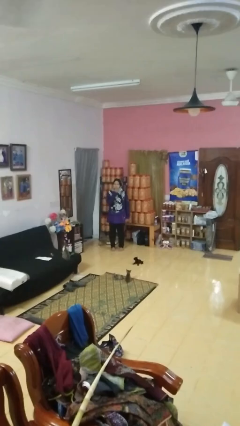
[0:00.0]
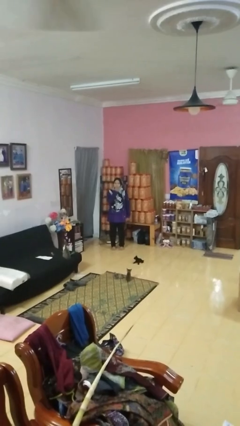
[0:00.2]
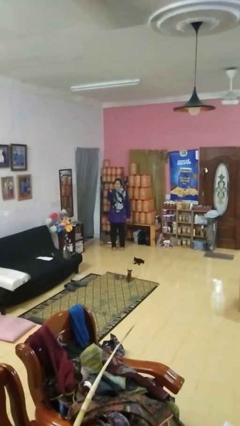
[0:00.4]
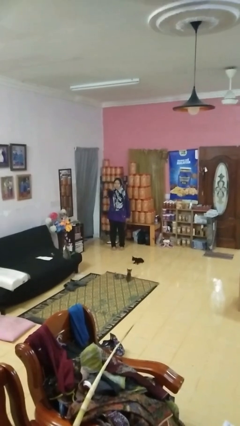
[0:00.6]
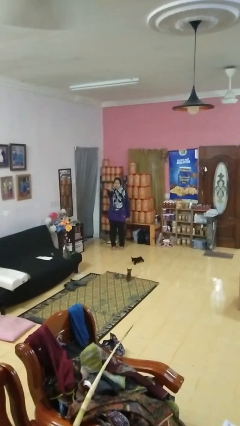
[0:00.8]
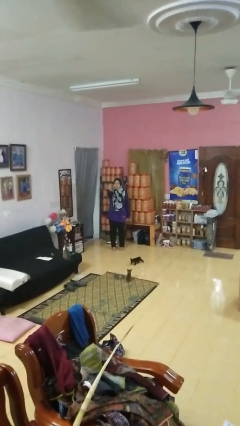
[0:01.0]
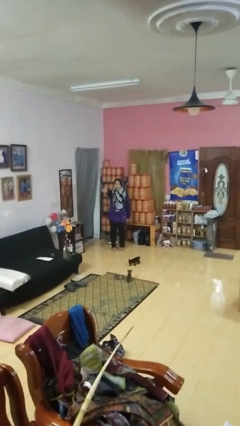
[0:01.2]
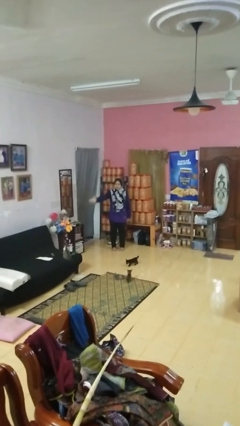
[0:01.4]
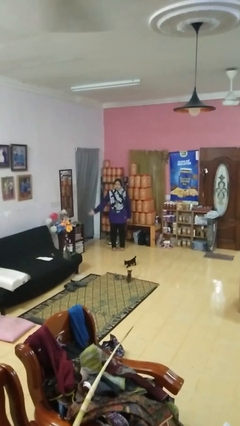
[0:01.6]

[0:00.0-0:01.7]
person gestures blow kiss

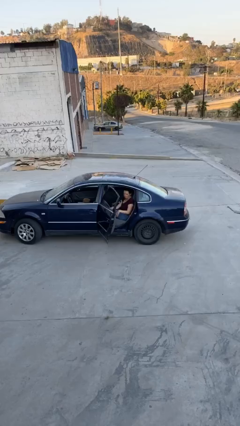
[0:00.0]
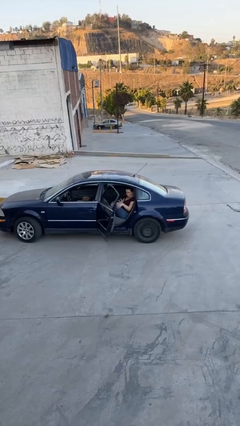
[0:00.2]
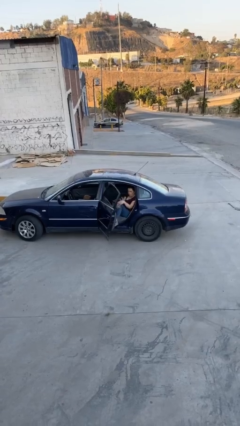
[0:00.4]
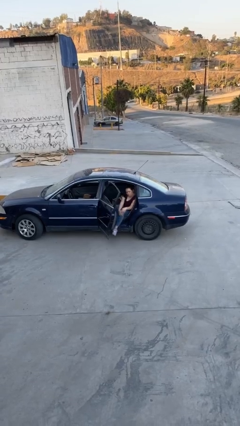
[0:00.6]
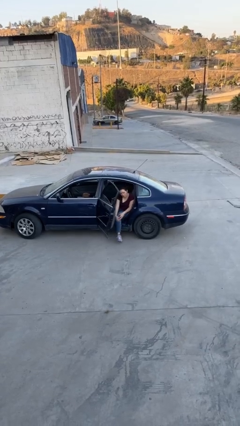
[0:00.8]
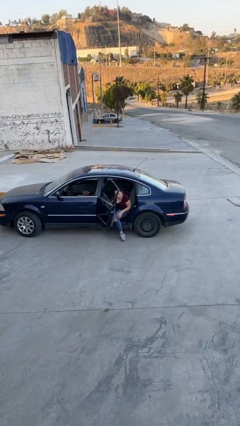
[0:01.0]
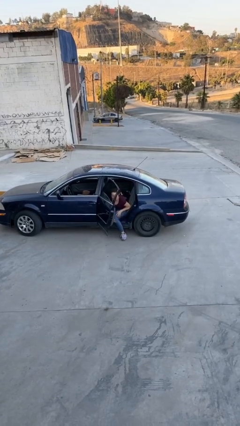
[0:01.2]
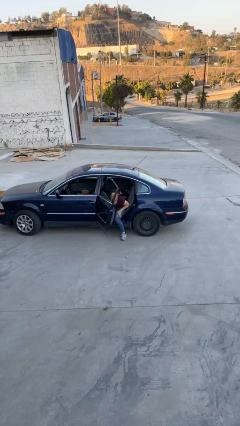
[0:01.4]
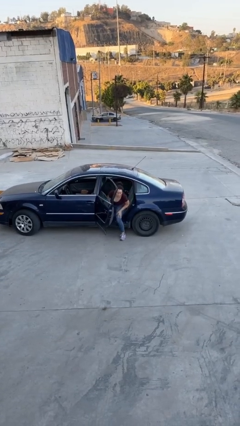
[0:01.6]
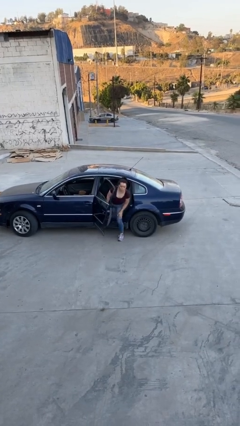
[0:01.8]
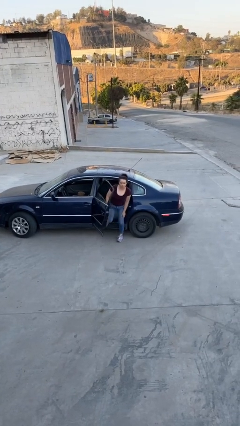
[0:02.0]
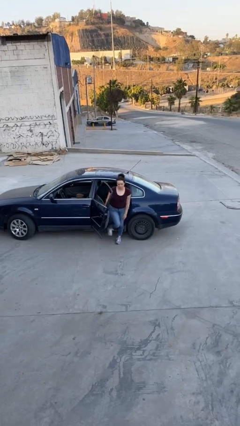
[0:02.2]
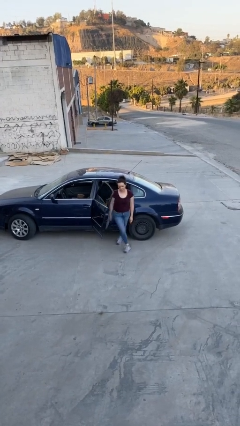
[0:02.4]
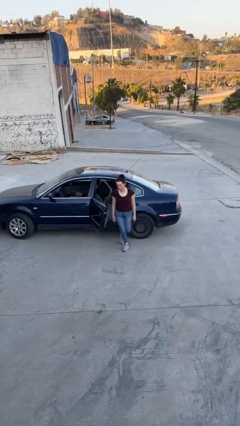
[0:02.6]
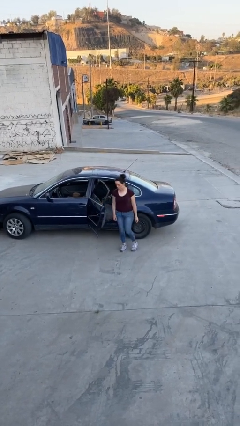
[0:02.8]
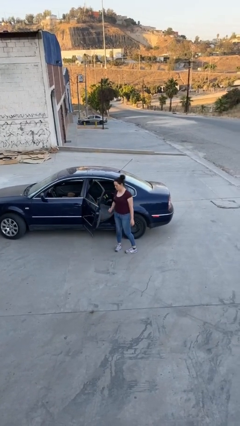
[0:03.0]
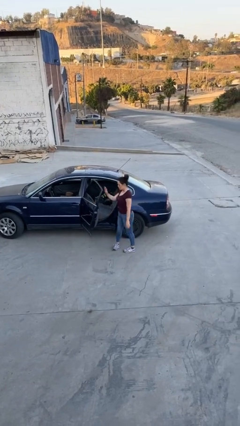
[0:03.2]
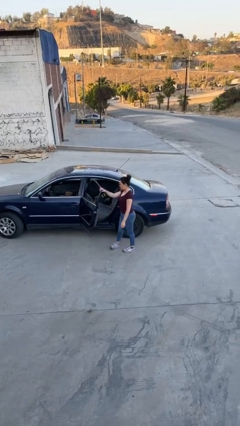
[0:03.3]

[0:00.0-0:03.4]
person exits car

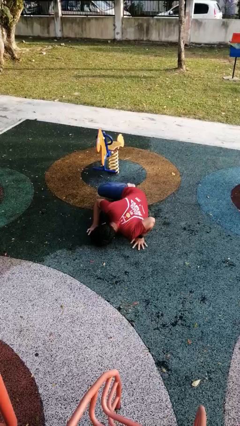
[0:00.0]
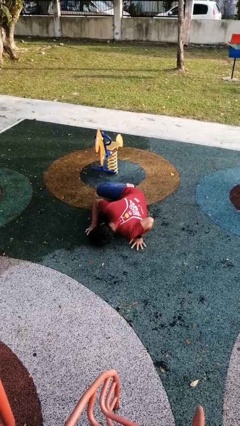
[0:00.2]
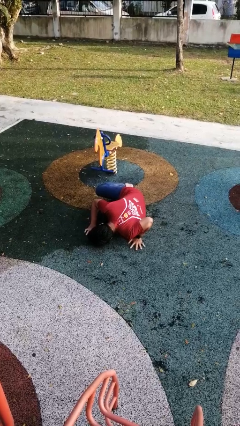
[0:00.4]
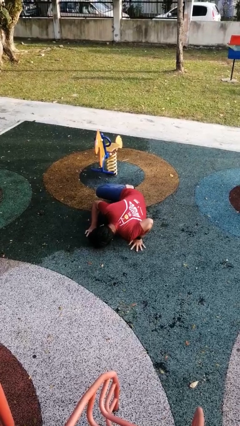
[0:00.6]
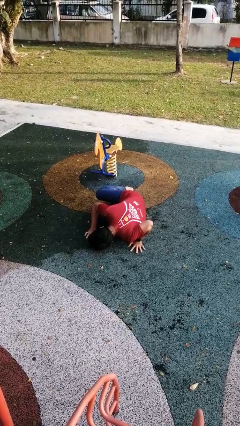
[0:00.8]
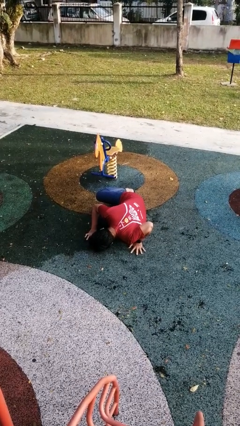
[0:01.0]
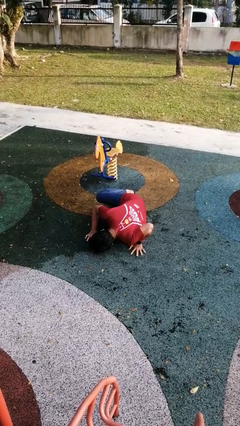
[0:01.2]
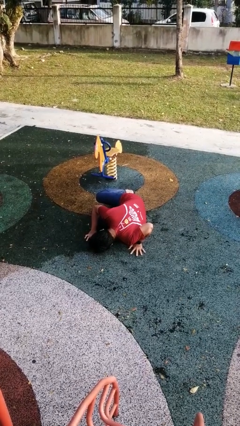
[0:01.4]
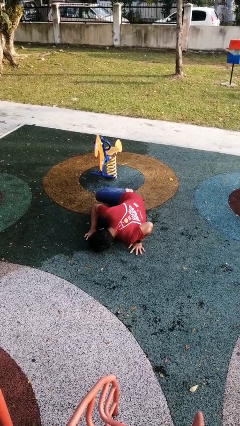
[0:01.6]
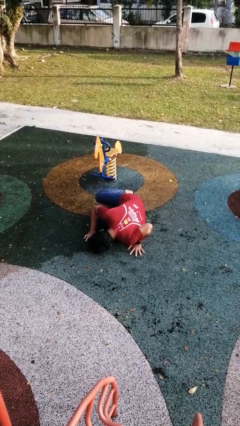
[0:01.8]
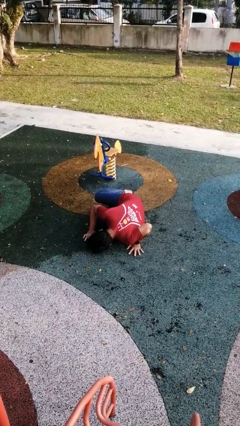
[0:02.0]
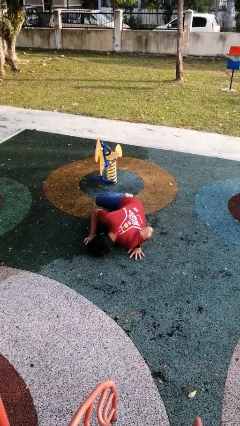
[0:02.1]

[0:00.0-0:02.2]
person lies down on floor

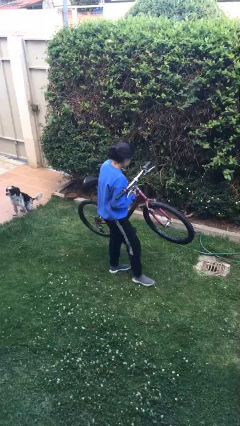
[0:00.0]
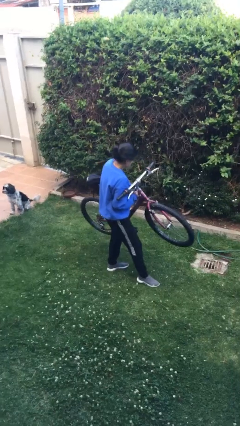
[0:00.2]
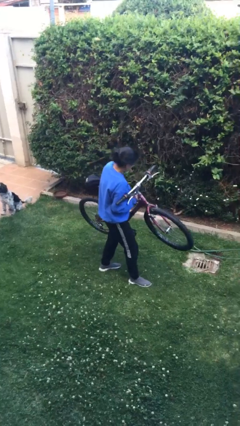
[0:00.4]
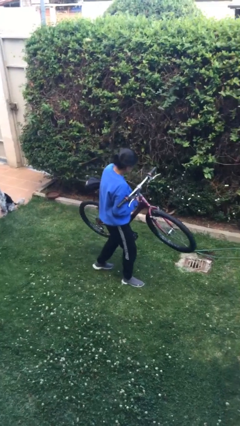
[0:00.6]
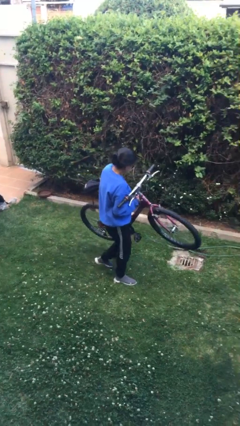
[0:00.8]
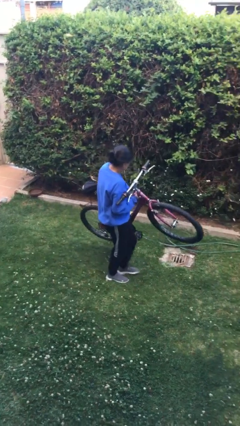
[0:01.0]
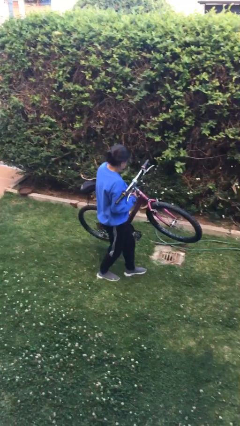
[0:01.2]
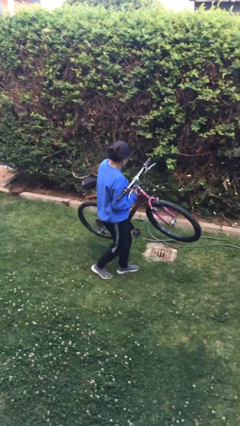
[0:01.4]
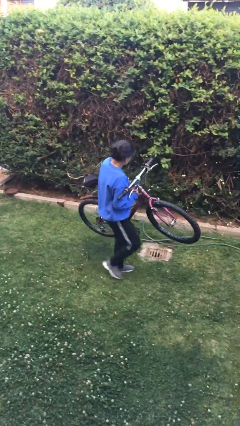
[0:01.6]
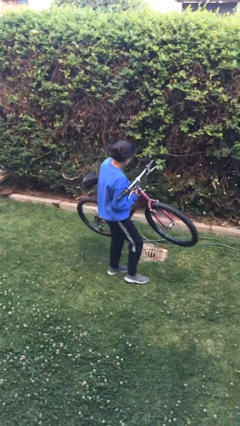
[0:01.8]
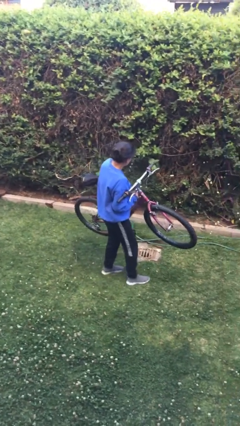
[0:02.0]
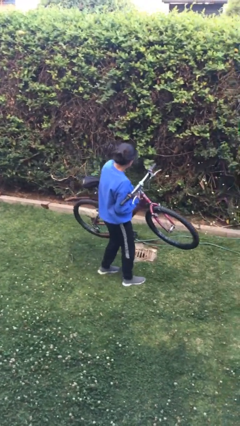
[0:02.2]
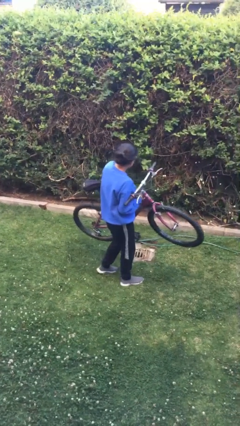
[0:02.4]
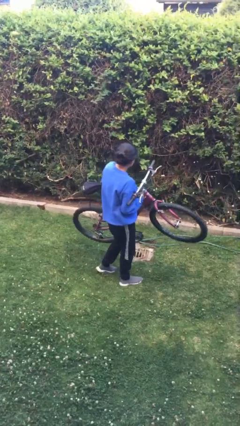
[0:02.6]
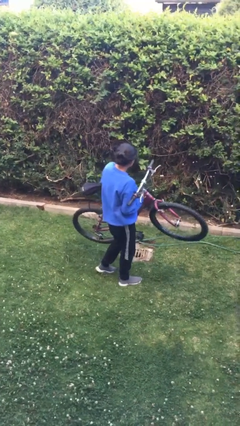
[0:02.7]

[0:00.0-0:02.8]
person carries bicycle

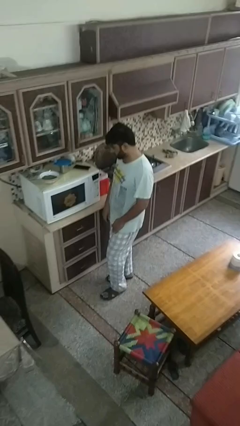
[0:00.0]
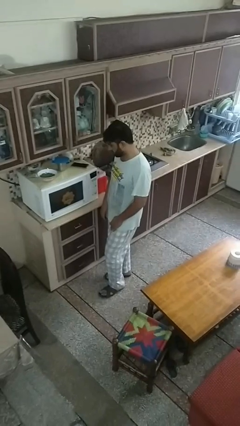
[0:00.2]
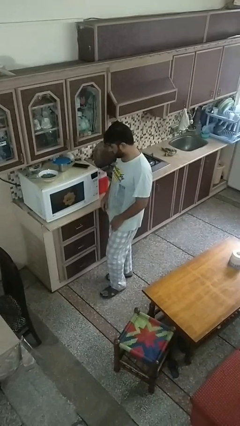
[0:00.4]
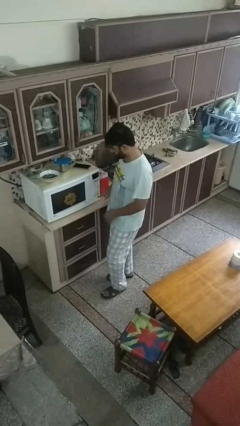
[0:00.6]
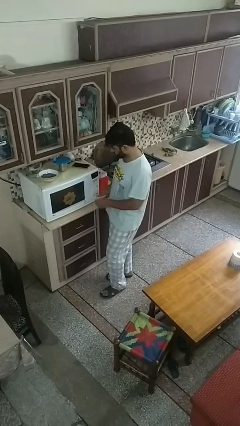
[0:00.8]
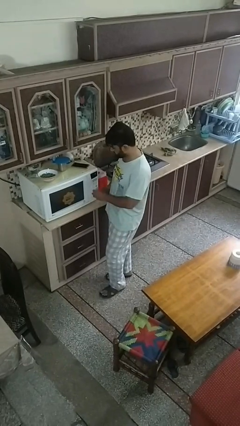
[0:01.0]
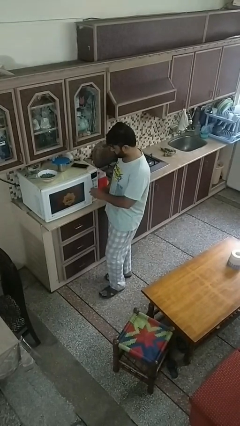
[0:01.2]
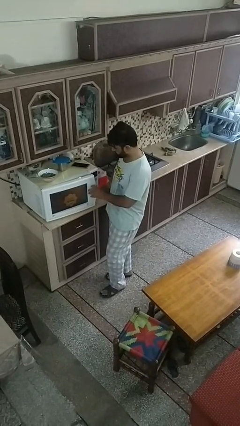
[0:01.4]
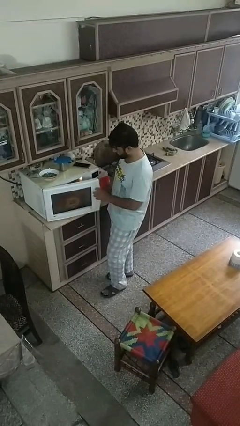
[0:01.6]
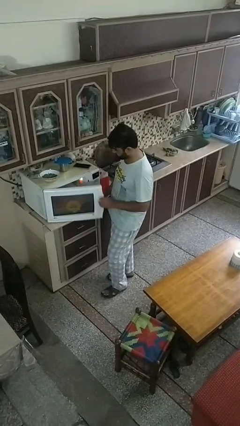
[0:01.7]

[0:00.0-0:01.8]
person opens oven door

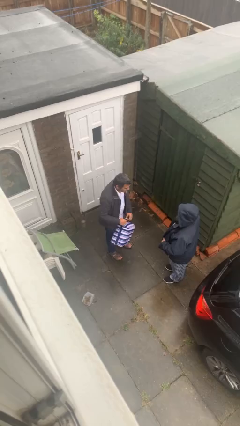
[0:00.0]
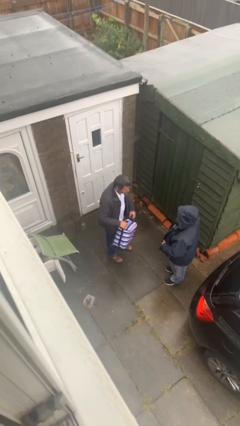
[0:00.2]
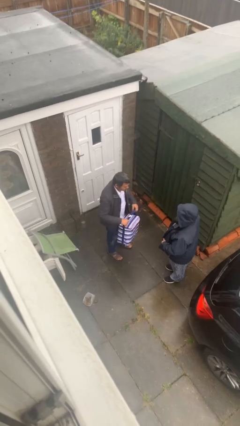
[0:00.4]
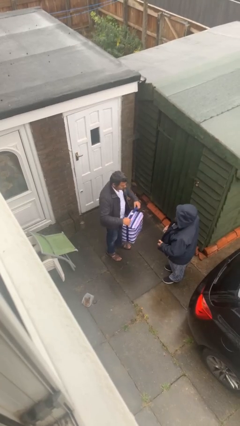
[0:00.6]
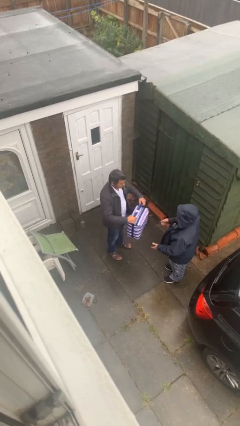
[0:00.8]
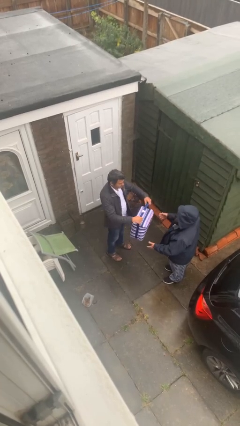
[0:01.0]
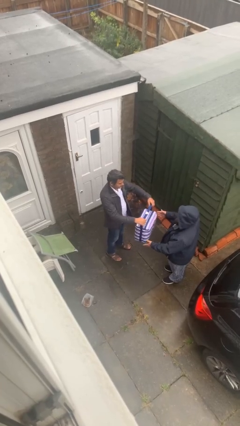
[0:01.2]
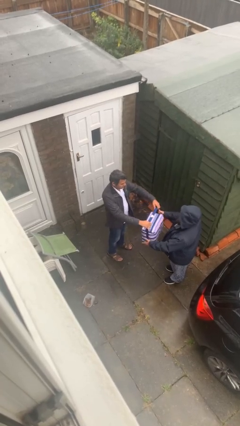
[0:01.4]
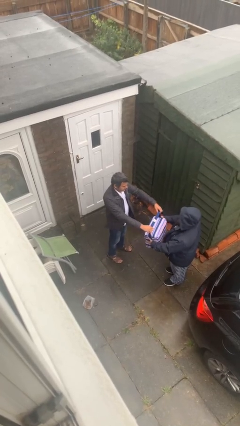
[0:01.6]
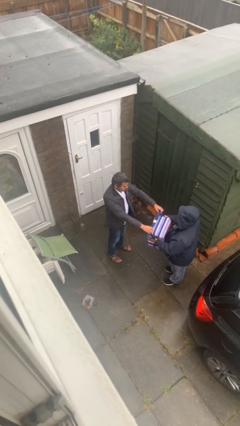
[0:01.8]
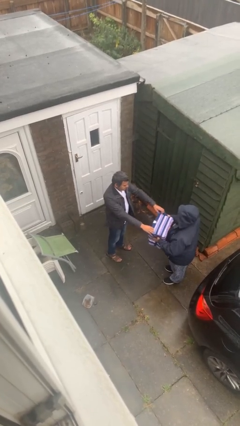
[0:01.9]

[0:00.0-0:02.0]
person transfers object to person

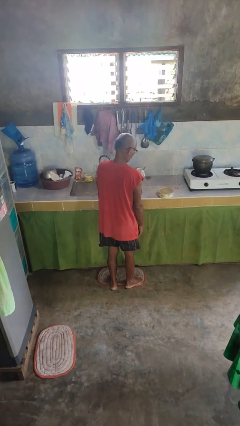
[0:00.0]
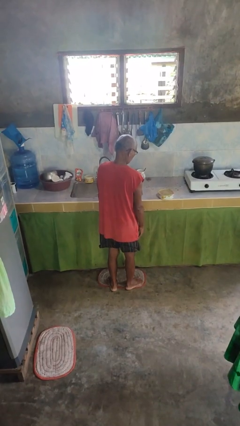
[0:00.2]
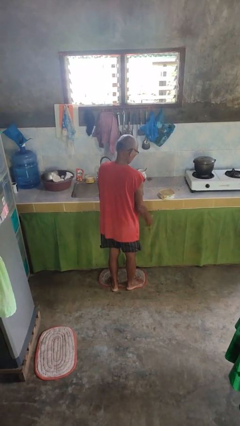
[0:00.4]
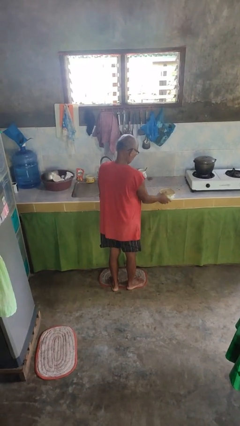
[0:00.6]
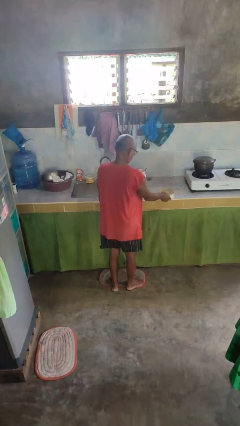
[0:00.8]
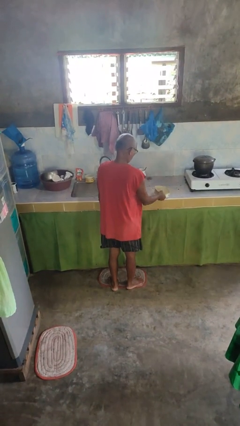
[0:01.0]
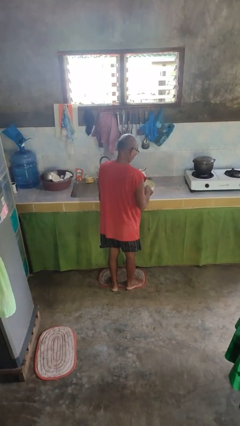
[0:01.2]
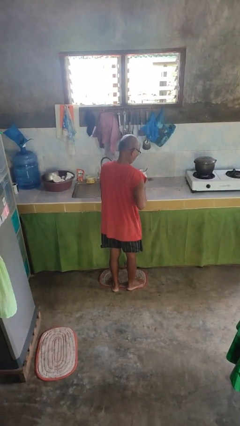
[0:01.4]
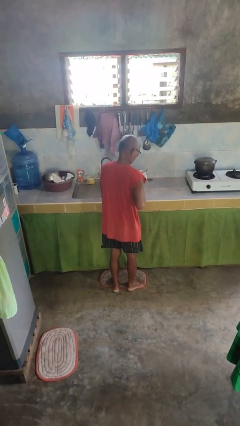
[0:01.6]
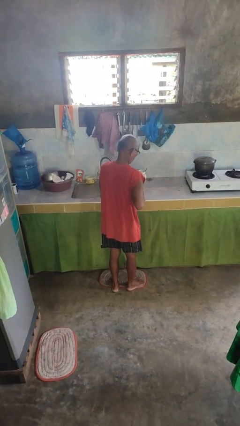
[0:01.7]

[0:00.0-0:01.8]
person picks up object from countertop

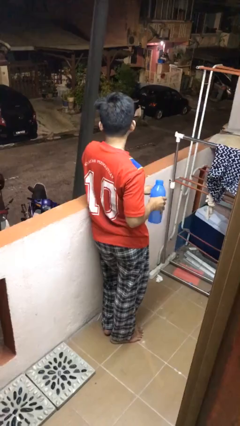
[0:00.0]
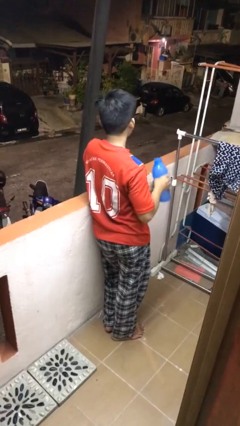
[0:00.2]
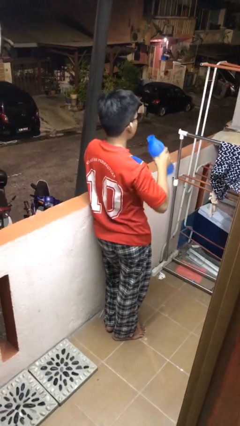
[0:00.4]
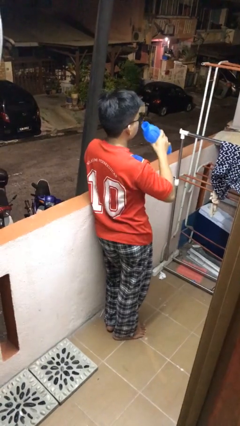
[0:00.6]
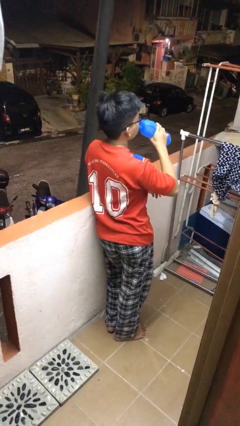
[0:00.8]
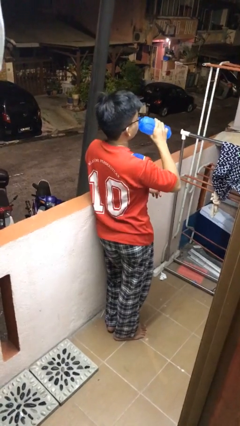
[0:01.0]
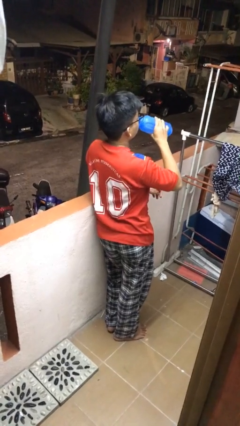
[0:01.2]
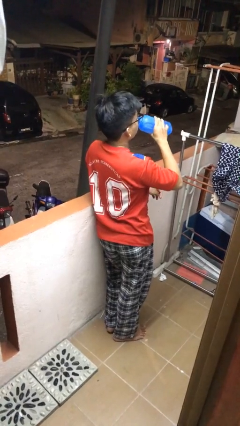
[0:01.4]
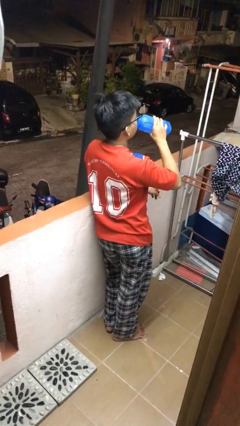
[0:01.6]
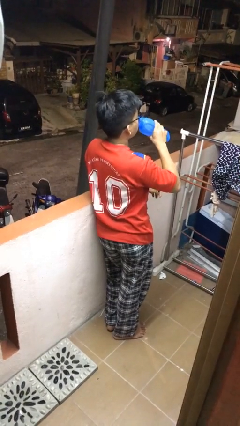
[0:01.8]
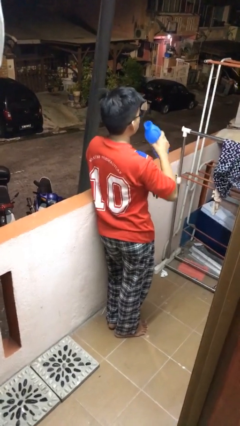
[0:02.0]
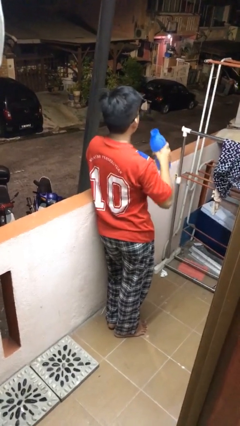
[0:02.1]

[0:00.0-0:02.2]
person drinks from bottle
